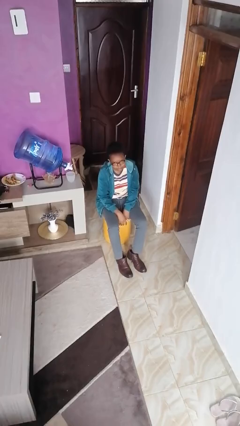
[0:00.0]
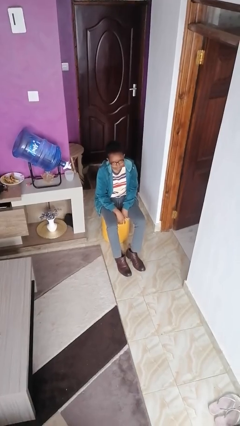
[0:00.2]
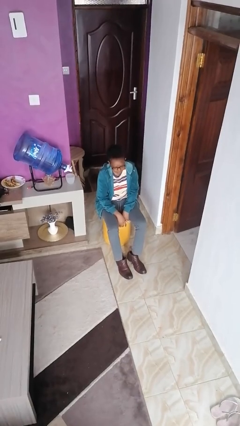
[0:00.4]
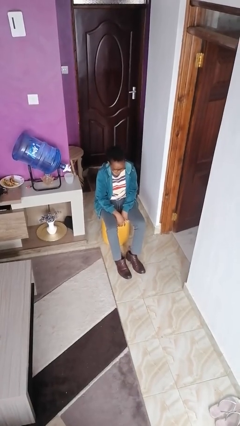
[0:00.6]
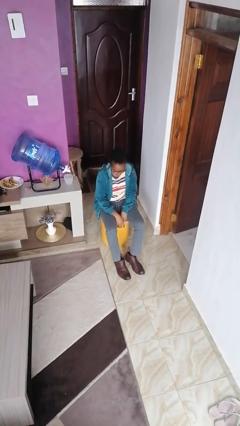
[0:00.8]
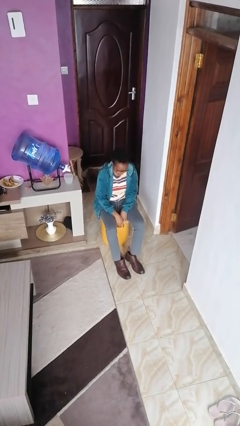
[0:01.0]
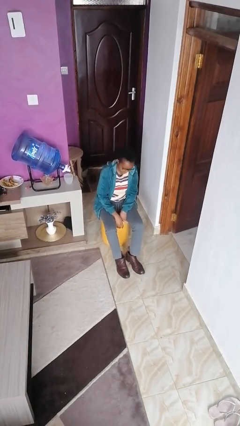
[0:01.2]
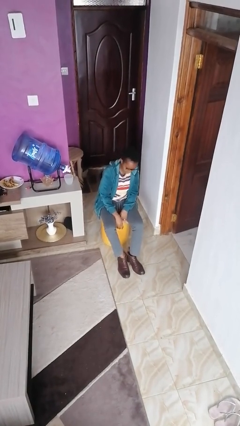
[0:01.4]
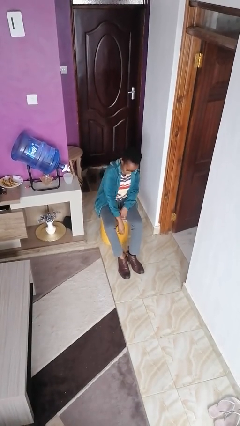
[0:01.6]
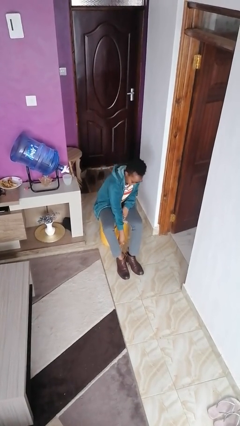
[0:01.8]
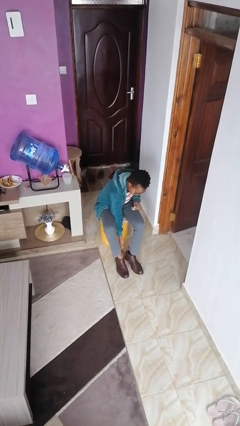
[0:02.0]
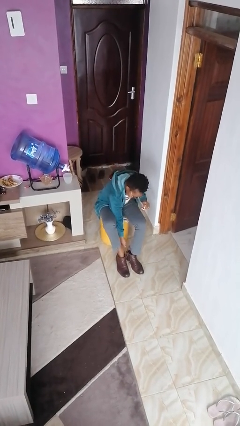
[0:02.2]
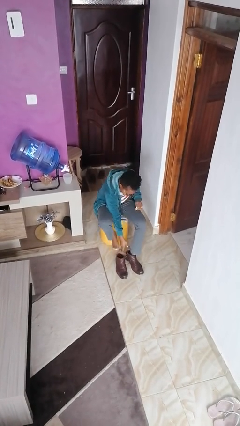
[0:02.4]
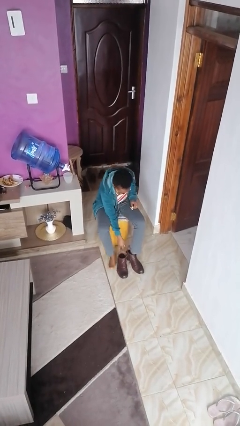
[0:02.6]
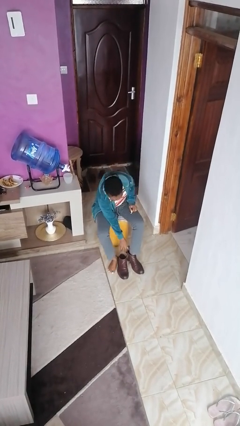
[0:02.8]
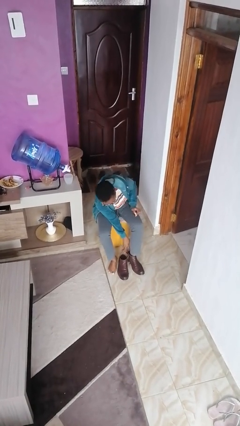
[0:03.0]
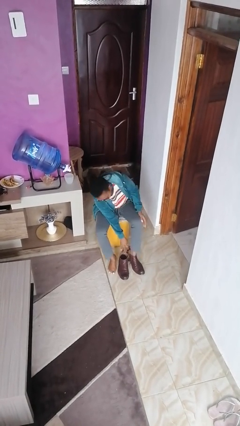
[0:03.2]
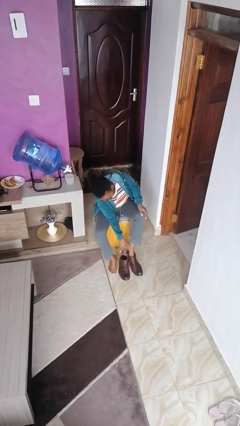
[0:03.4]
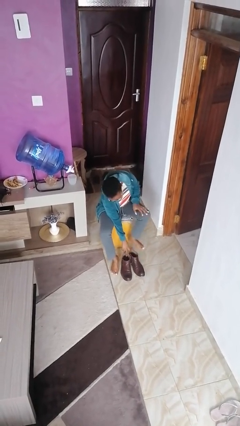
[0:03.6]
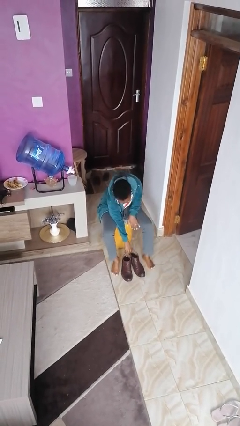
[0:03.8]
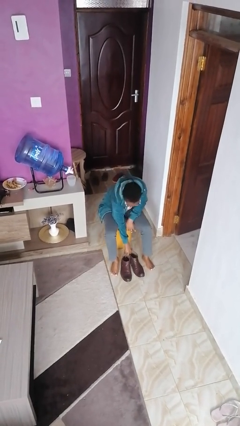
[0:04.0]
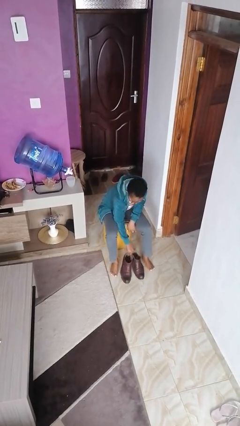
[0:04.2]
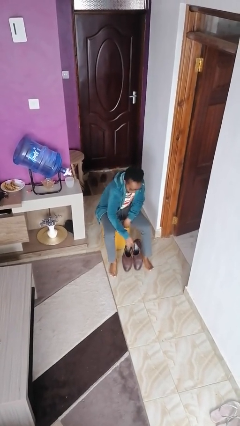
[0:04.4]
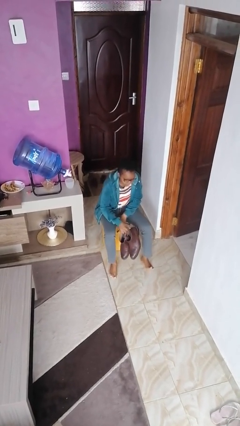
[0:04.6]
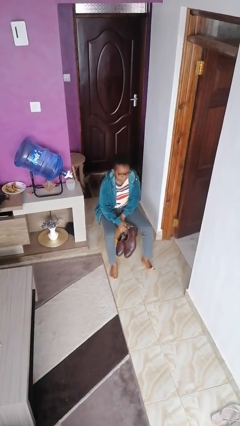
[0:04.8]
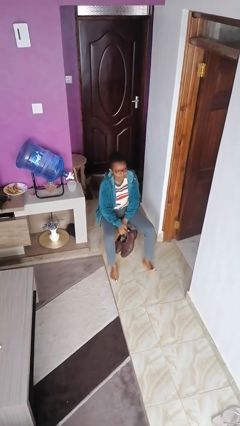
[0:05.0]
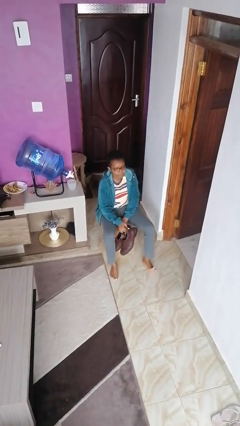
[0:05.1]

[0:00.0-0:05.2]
person takes off boots

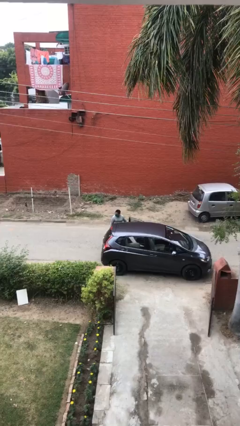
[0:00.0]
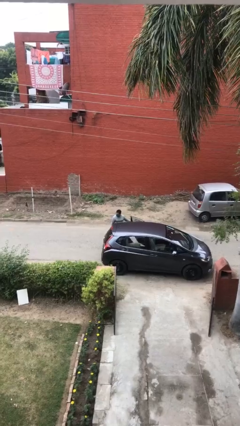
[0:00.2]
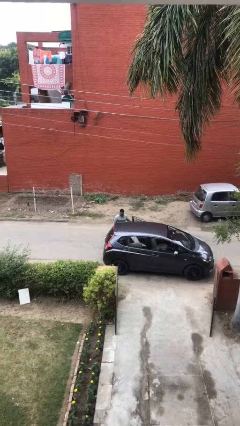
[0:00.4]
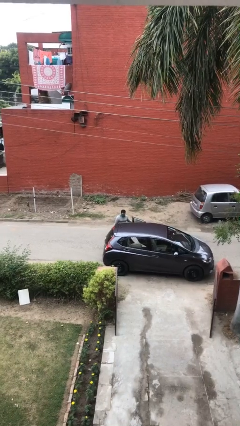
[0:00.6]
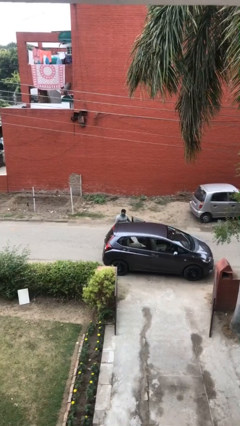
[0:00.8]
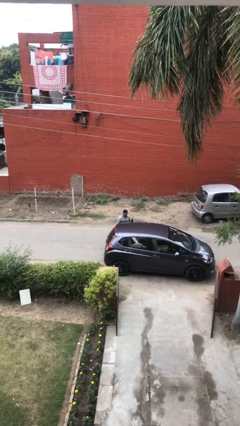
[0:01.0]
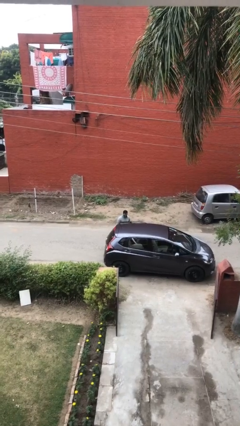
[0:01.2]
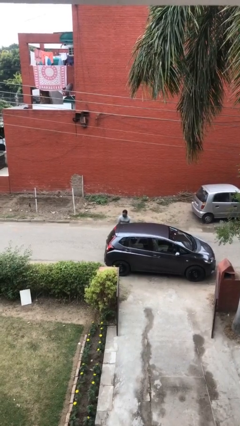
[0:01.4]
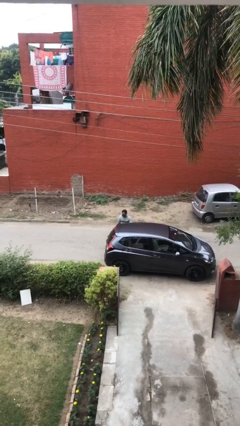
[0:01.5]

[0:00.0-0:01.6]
person closes car door

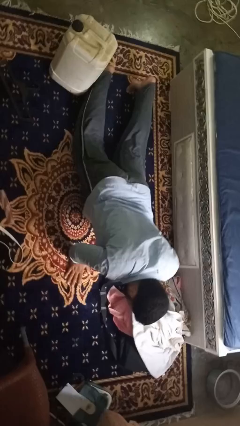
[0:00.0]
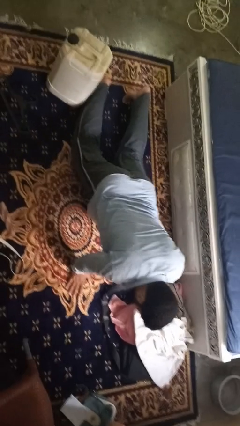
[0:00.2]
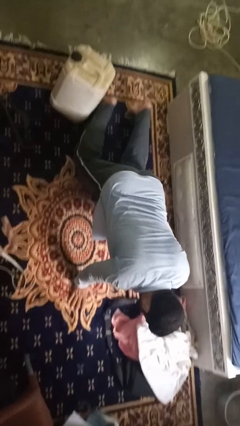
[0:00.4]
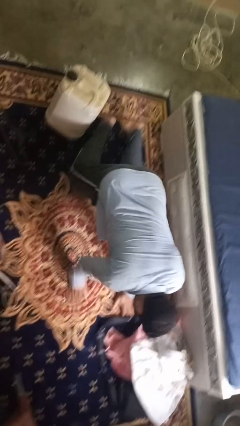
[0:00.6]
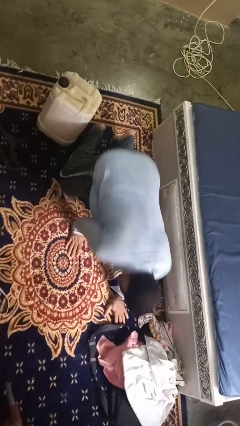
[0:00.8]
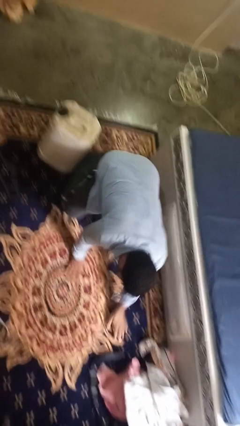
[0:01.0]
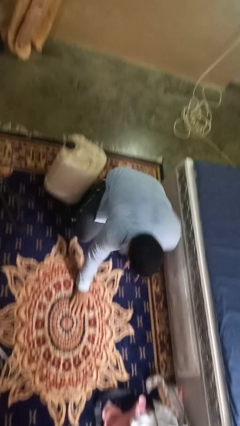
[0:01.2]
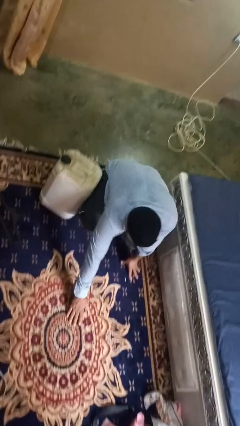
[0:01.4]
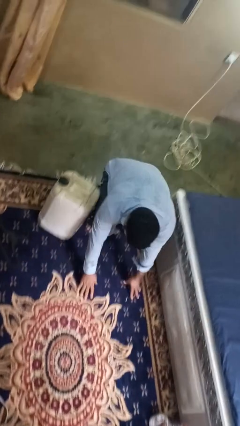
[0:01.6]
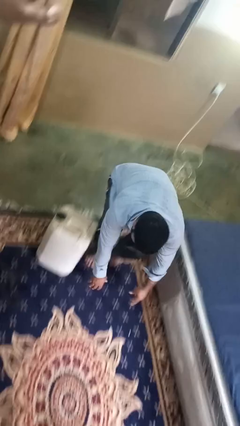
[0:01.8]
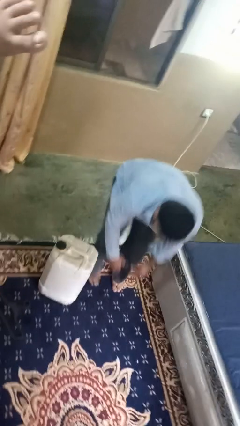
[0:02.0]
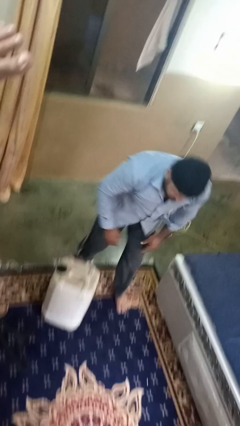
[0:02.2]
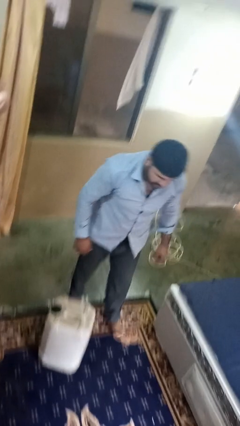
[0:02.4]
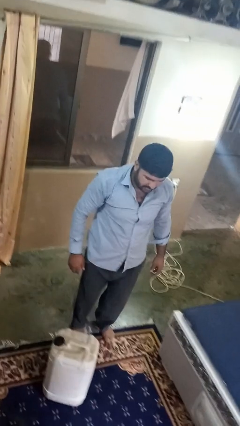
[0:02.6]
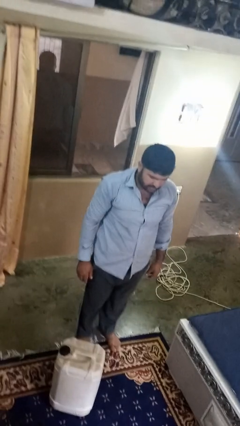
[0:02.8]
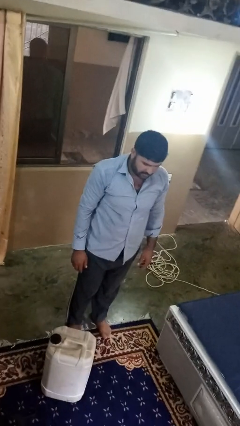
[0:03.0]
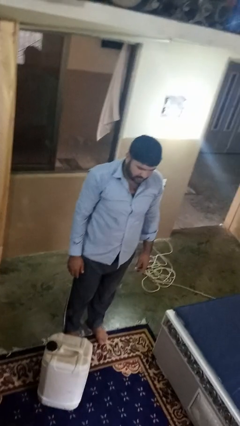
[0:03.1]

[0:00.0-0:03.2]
person stands up from floor

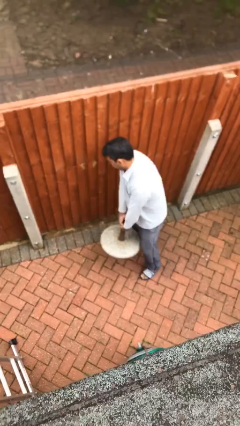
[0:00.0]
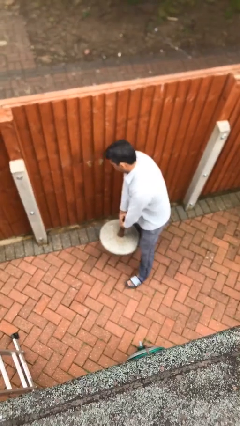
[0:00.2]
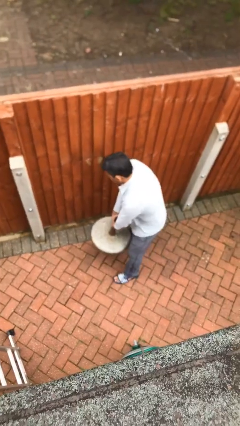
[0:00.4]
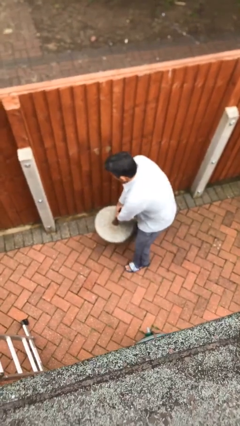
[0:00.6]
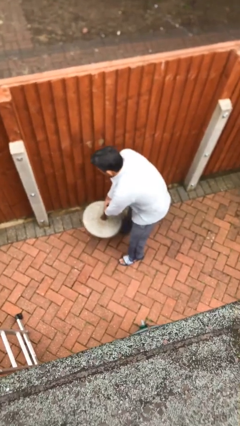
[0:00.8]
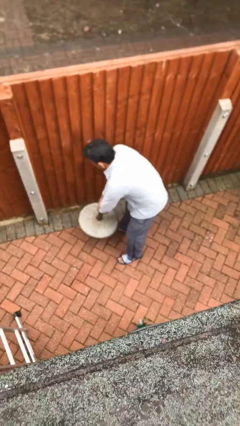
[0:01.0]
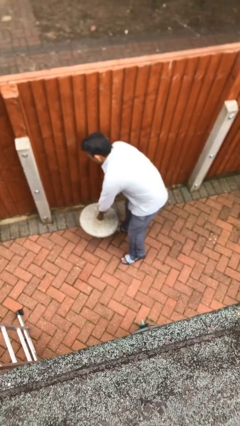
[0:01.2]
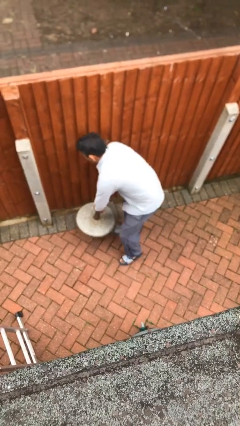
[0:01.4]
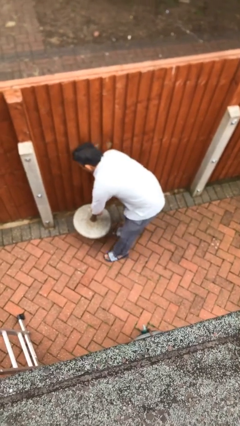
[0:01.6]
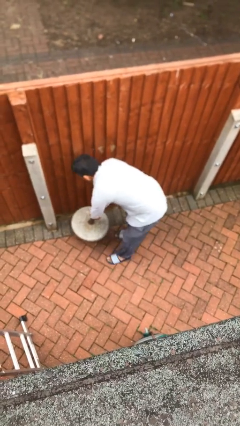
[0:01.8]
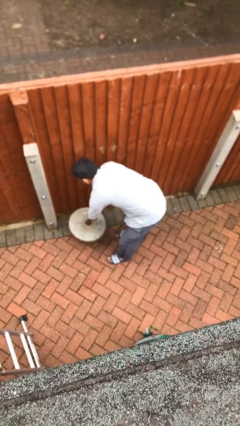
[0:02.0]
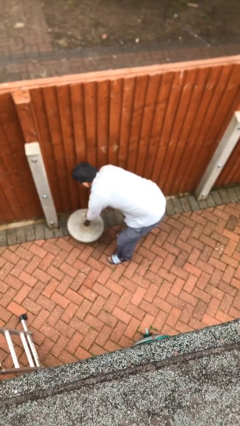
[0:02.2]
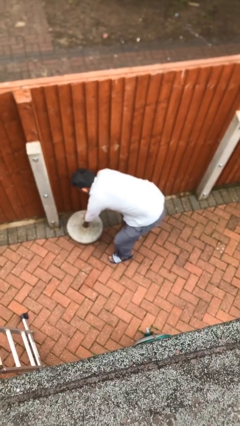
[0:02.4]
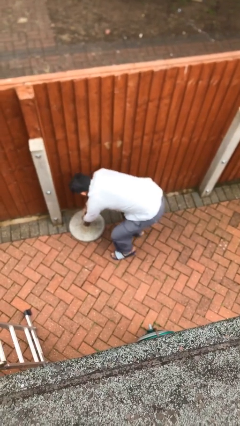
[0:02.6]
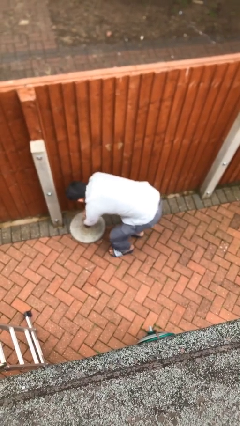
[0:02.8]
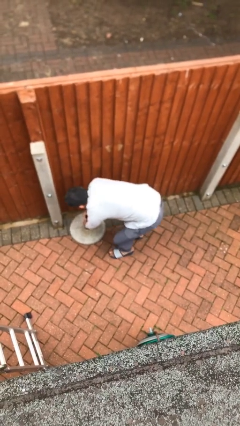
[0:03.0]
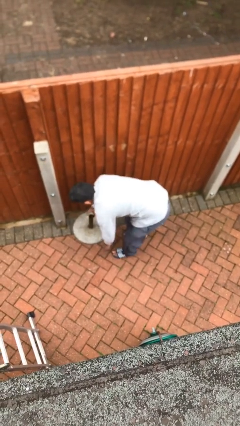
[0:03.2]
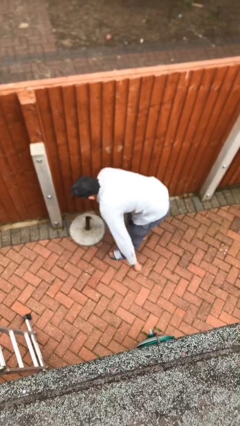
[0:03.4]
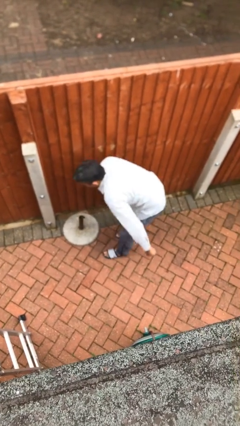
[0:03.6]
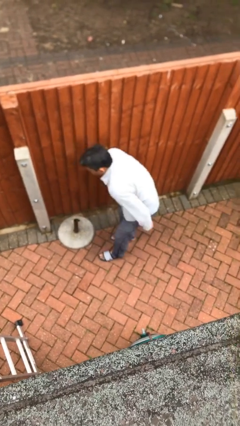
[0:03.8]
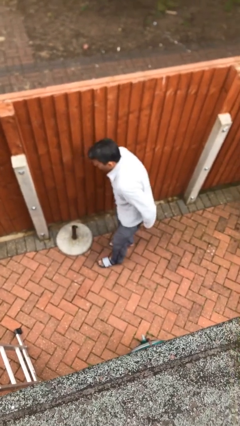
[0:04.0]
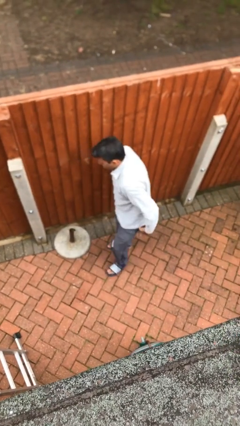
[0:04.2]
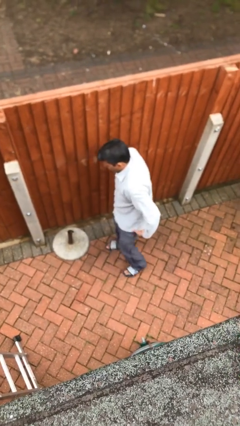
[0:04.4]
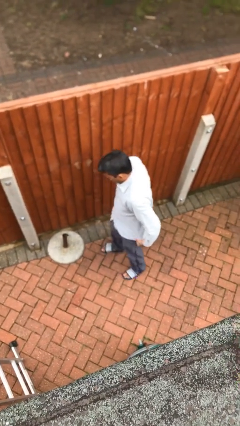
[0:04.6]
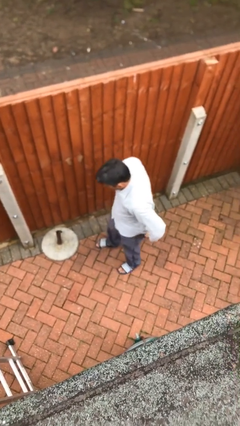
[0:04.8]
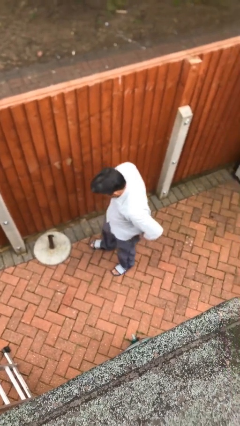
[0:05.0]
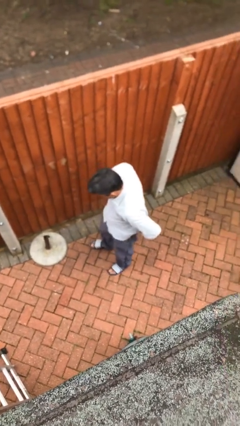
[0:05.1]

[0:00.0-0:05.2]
person puts down object on floor

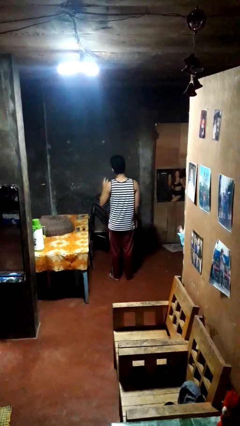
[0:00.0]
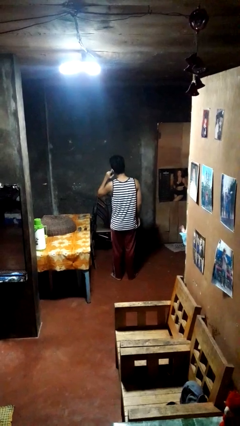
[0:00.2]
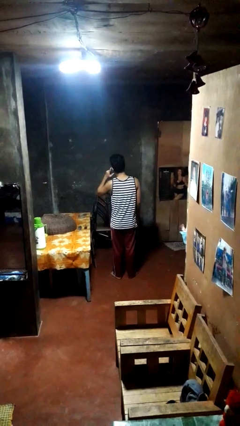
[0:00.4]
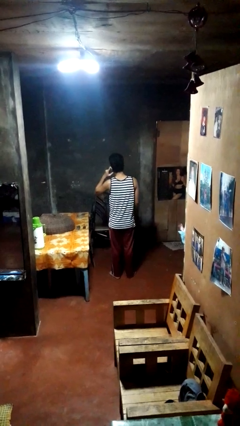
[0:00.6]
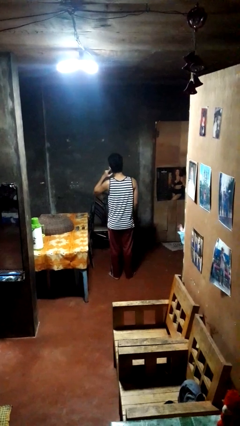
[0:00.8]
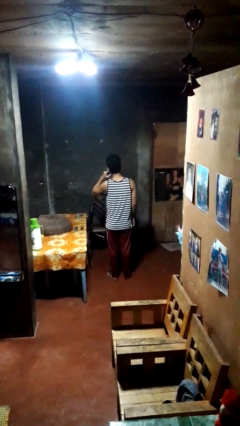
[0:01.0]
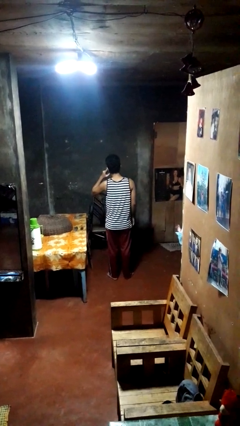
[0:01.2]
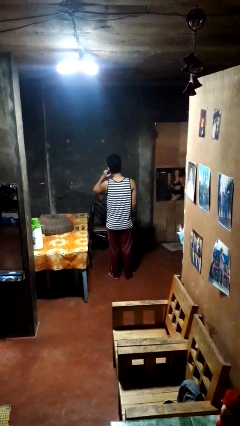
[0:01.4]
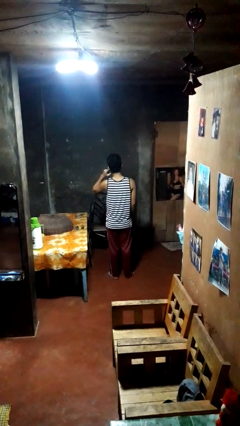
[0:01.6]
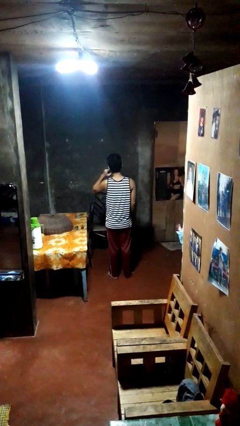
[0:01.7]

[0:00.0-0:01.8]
person gestures listen closely

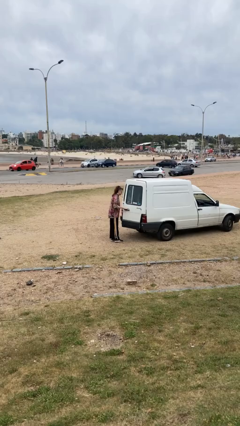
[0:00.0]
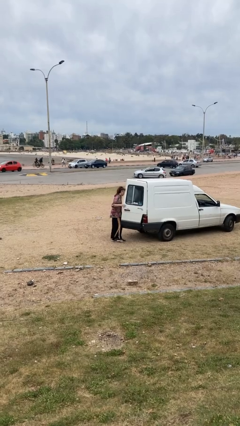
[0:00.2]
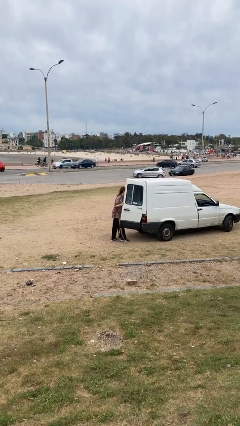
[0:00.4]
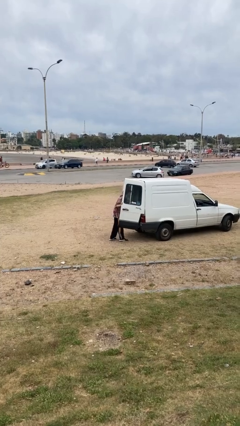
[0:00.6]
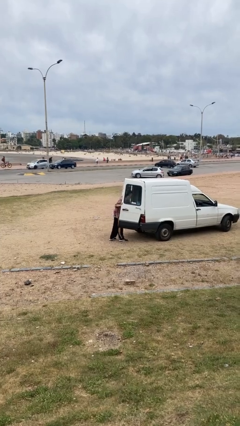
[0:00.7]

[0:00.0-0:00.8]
person opens car door
